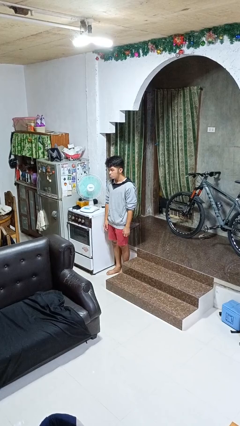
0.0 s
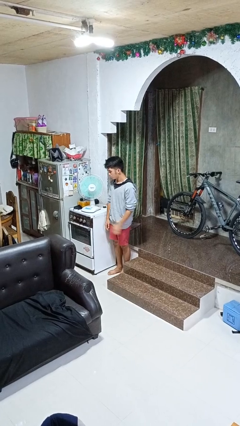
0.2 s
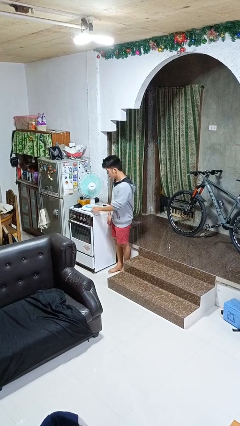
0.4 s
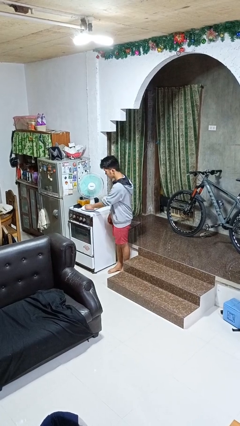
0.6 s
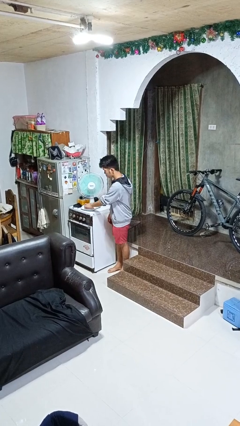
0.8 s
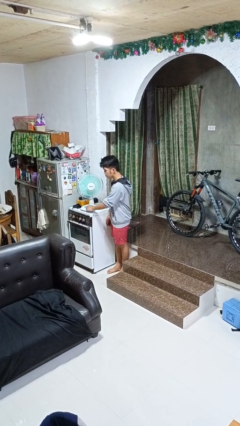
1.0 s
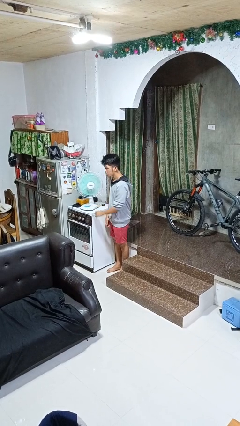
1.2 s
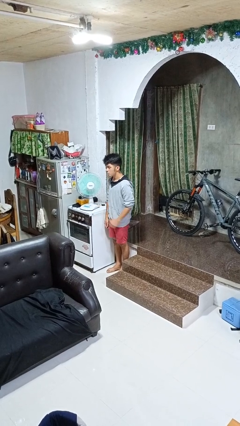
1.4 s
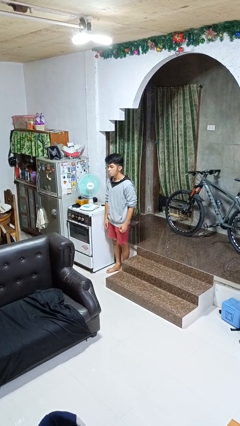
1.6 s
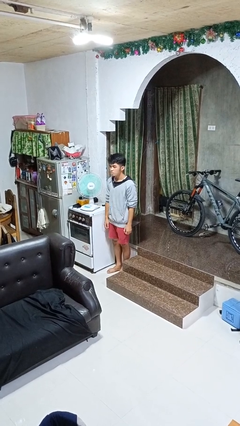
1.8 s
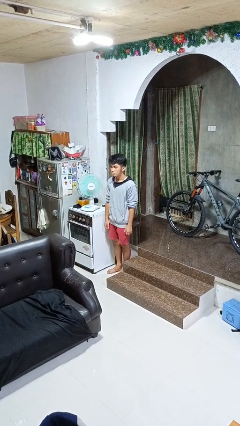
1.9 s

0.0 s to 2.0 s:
person turns off fan

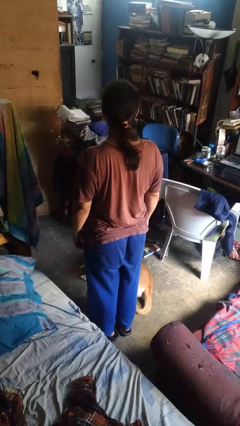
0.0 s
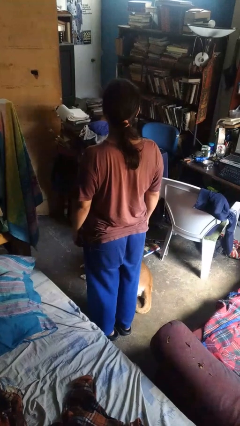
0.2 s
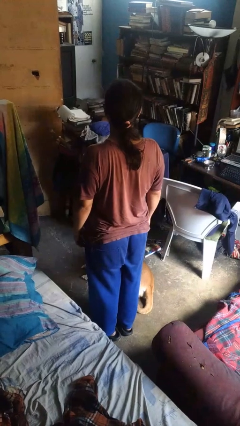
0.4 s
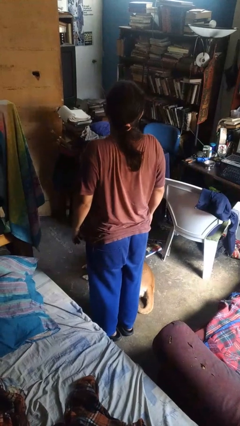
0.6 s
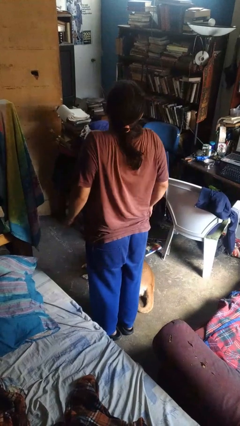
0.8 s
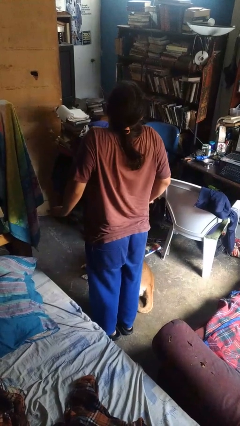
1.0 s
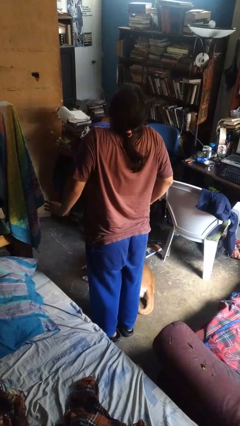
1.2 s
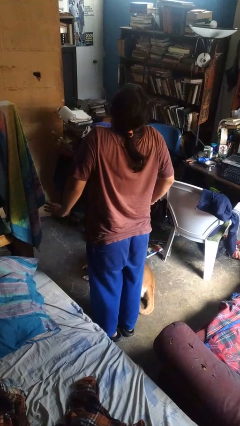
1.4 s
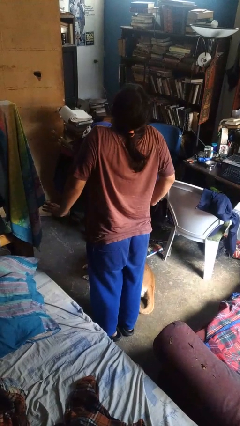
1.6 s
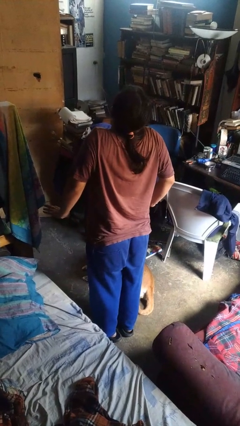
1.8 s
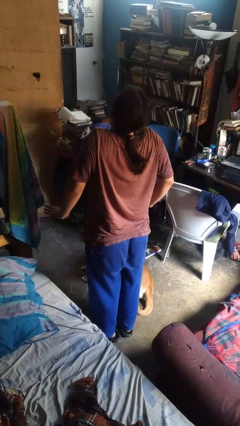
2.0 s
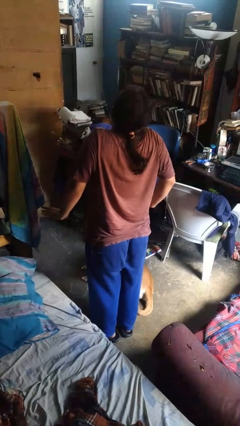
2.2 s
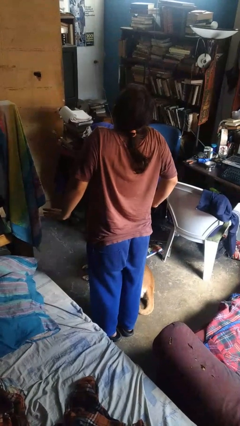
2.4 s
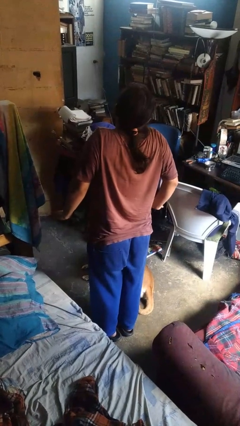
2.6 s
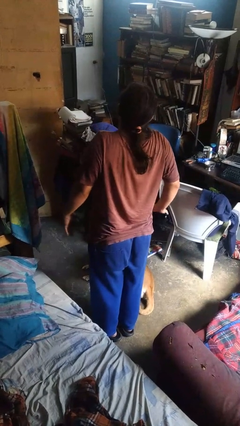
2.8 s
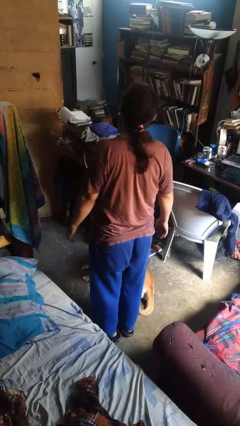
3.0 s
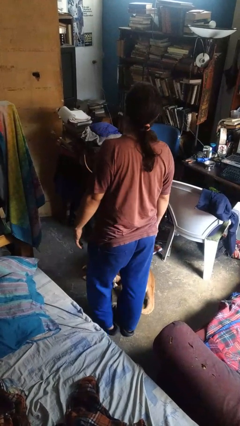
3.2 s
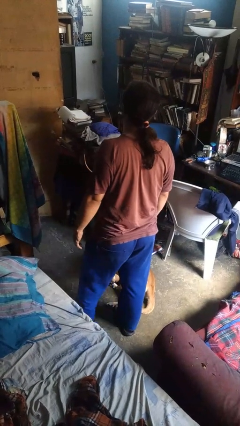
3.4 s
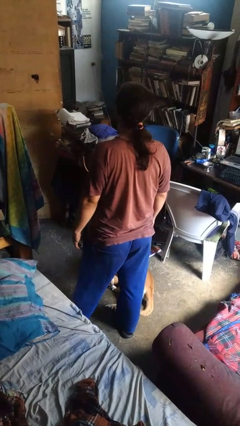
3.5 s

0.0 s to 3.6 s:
person shrugs

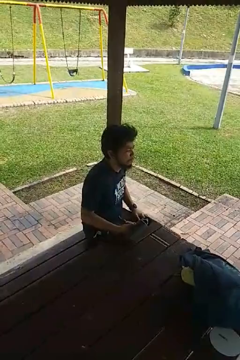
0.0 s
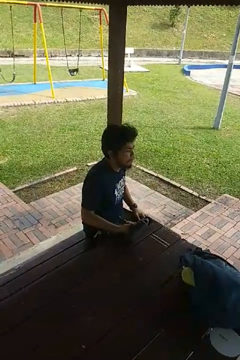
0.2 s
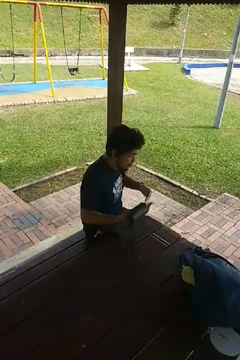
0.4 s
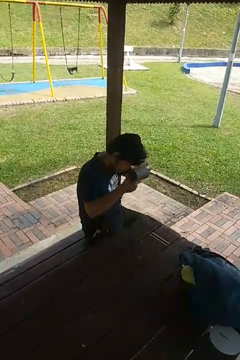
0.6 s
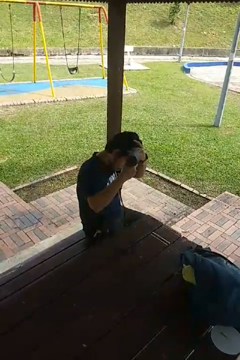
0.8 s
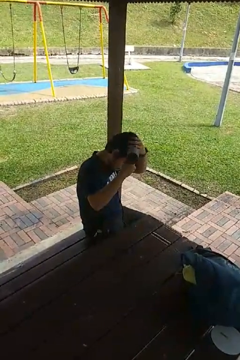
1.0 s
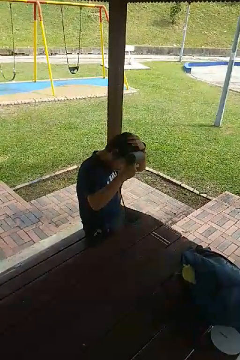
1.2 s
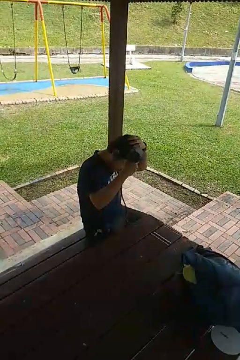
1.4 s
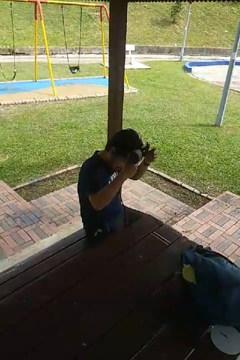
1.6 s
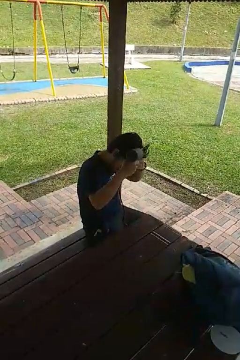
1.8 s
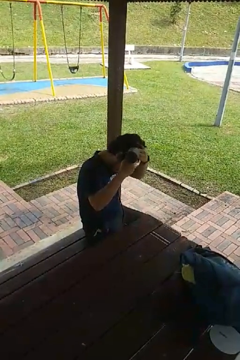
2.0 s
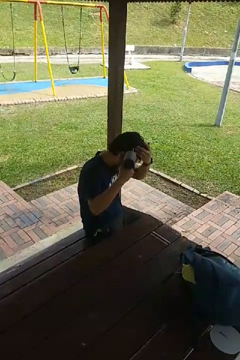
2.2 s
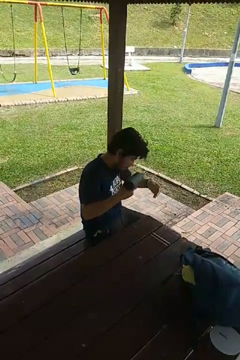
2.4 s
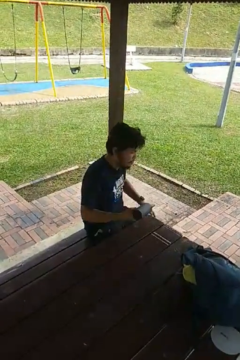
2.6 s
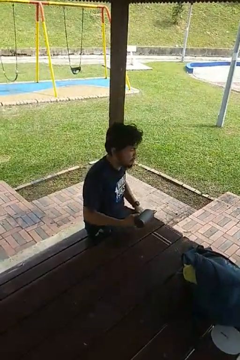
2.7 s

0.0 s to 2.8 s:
person dries hair with hairdryer

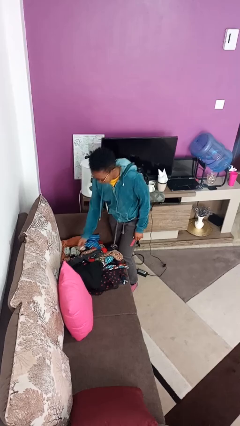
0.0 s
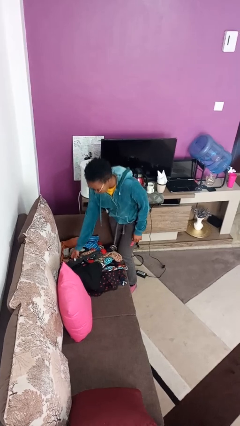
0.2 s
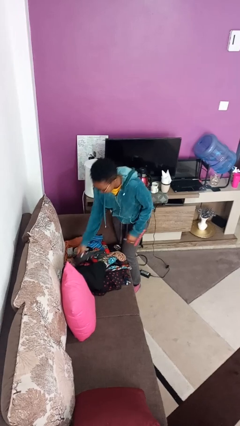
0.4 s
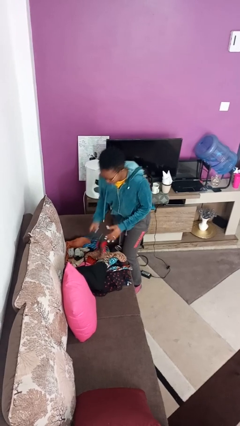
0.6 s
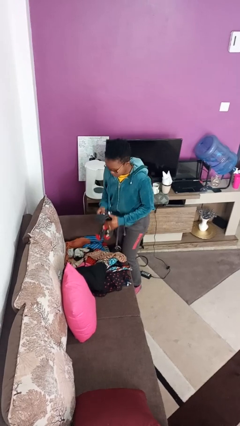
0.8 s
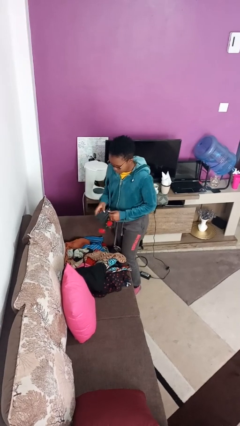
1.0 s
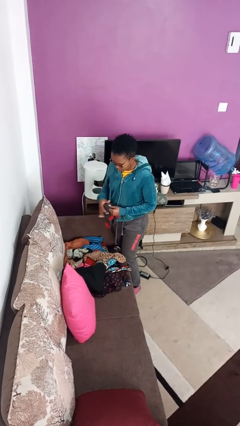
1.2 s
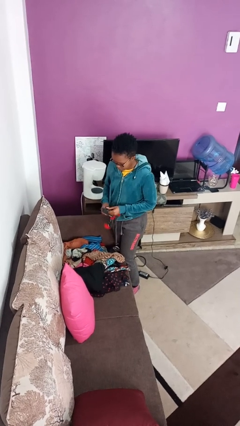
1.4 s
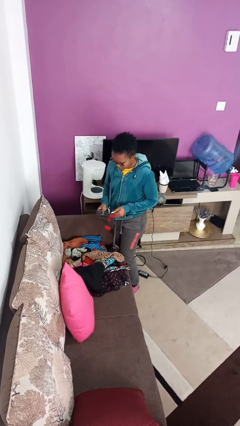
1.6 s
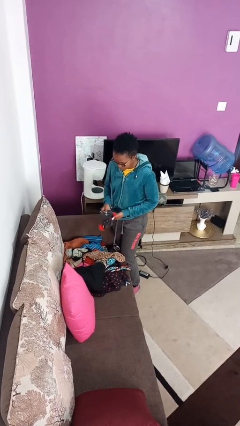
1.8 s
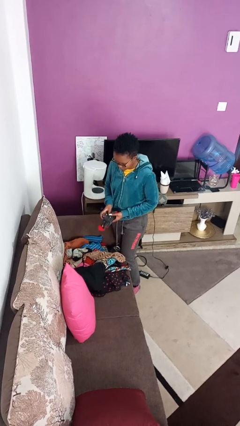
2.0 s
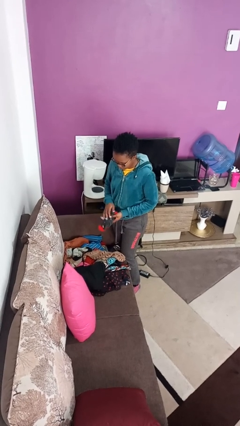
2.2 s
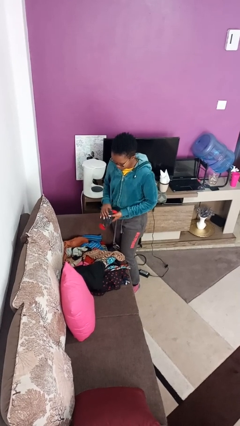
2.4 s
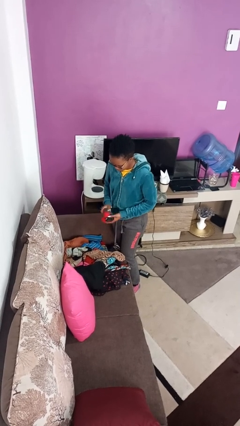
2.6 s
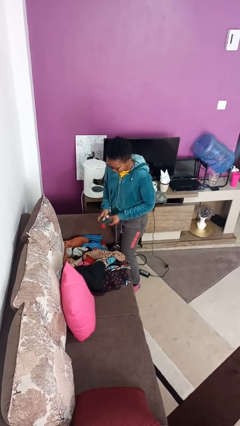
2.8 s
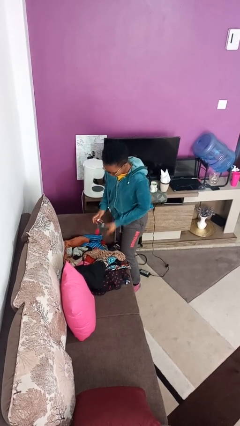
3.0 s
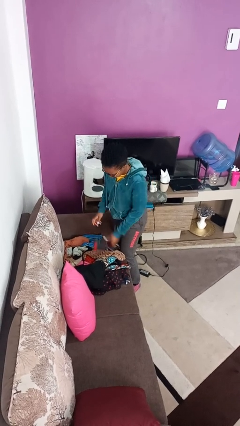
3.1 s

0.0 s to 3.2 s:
person folds socks

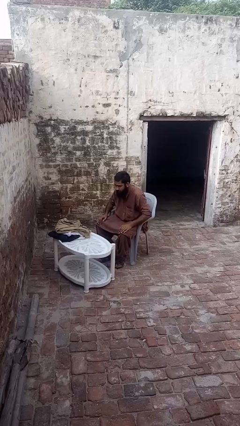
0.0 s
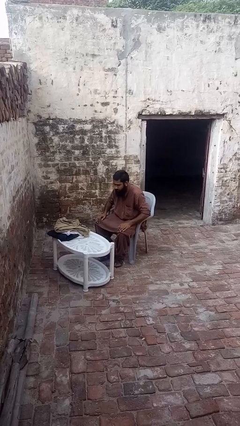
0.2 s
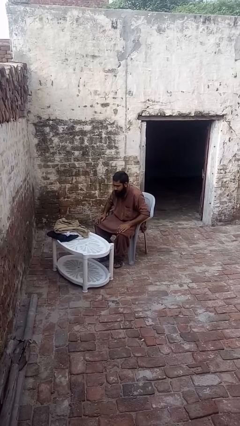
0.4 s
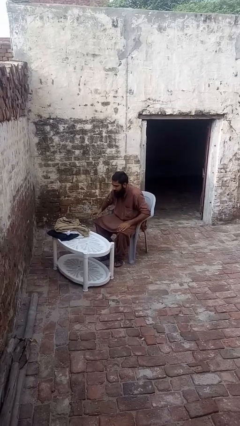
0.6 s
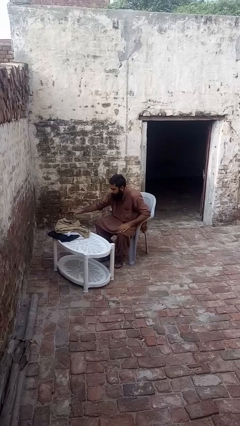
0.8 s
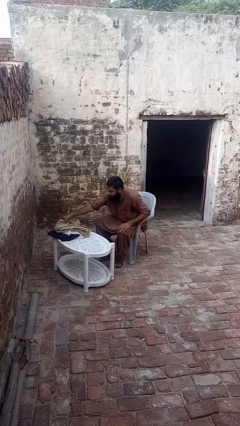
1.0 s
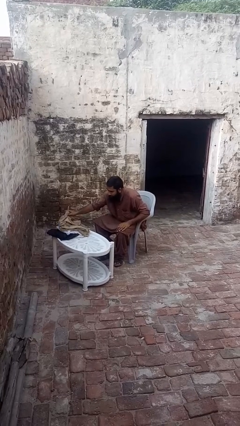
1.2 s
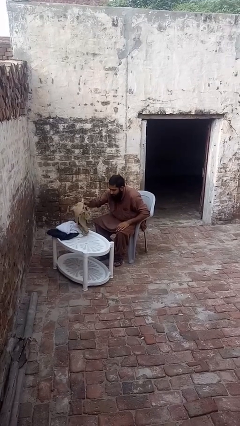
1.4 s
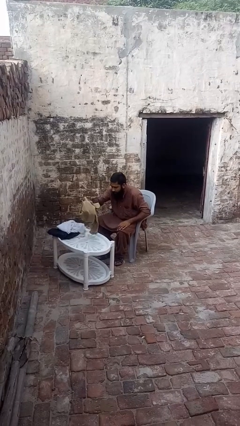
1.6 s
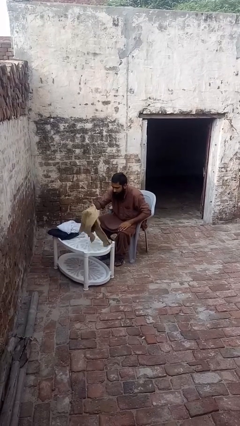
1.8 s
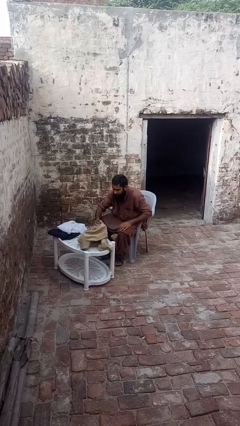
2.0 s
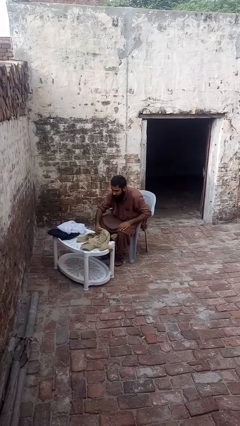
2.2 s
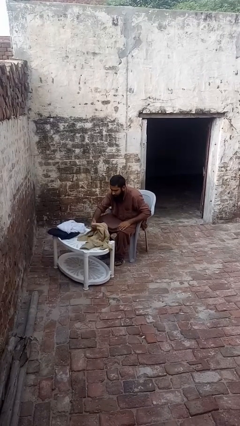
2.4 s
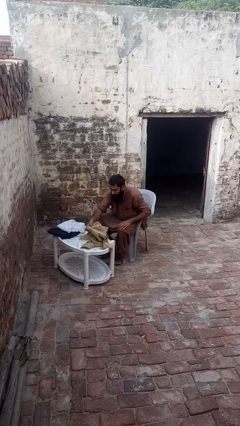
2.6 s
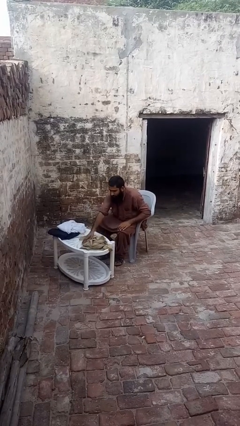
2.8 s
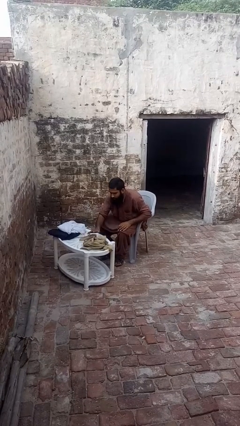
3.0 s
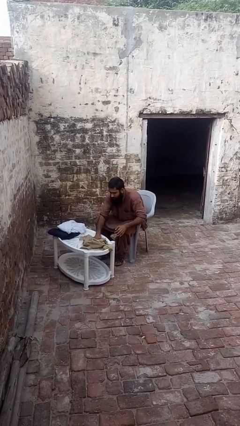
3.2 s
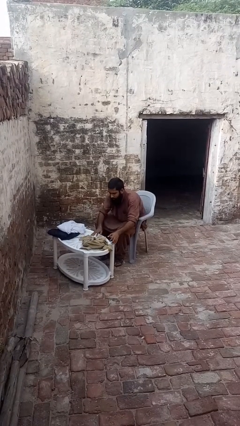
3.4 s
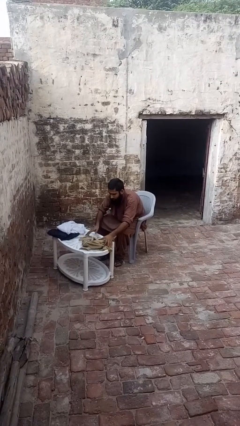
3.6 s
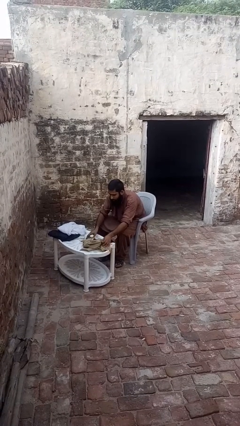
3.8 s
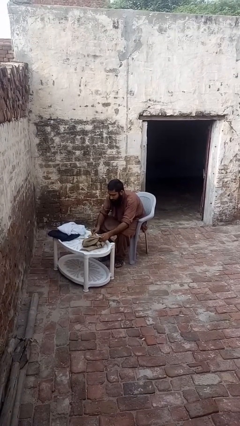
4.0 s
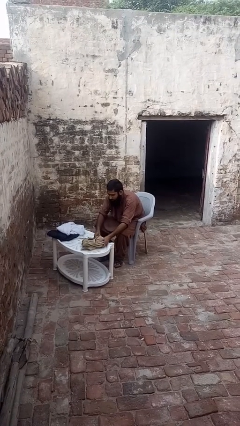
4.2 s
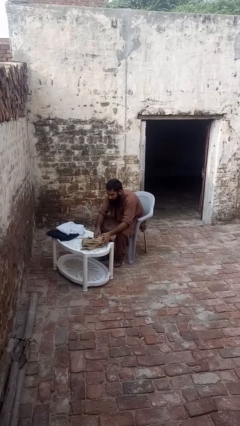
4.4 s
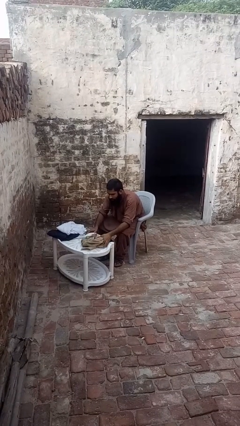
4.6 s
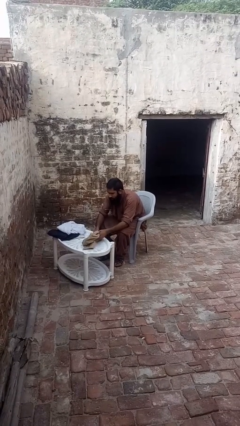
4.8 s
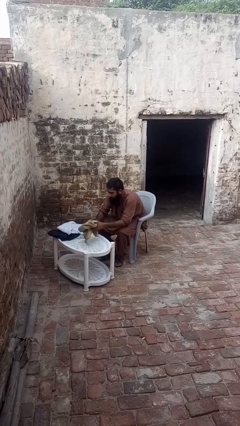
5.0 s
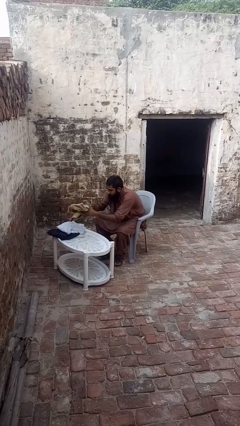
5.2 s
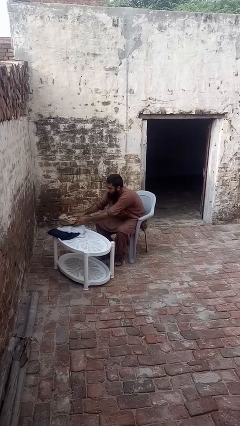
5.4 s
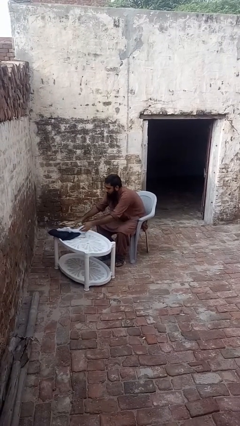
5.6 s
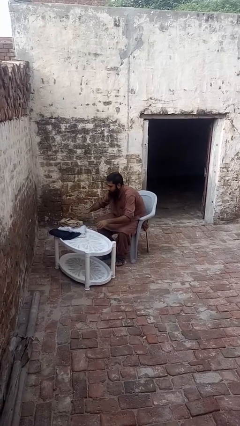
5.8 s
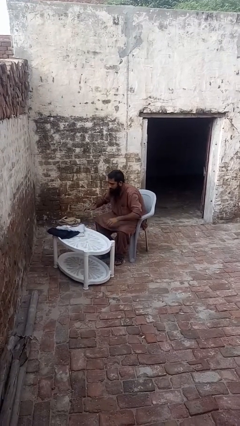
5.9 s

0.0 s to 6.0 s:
person folds shirt

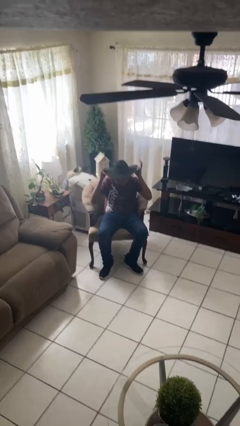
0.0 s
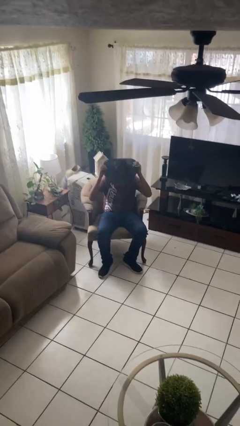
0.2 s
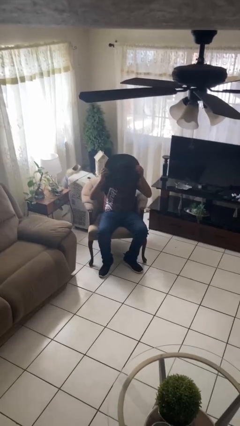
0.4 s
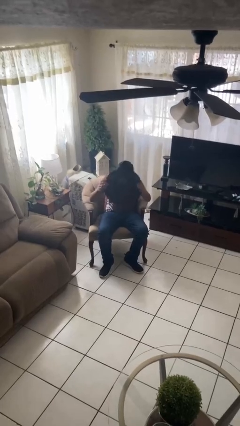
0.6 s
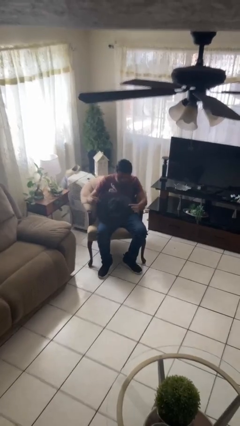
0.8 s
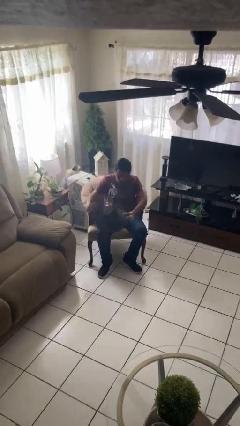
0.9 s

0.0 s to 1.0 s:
person takes off hat
